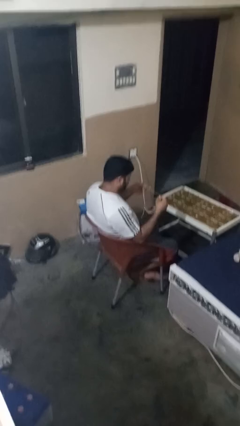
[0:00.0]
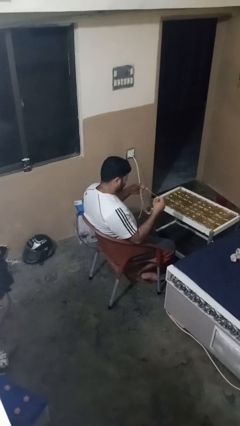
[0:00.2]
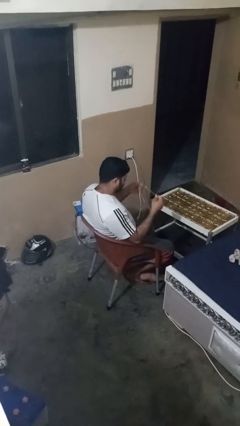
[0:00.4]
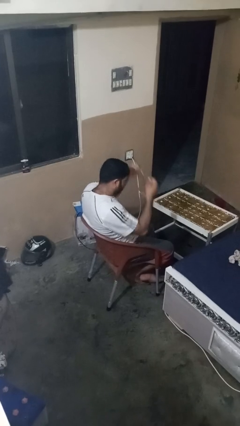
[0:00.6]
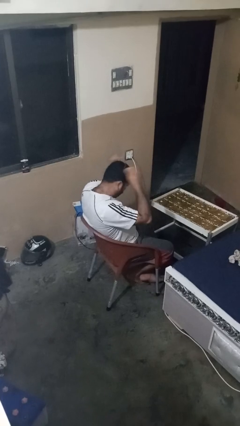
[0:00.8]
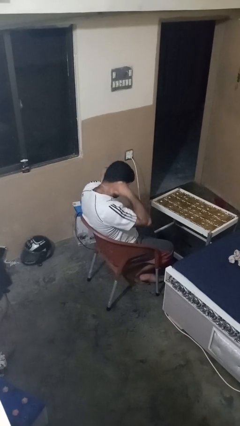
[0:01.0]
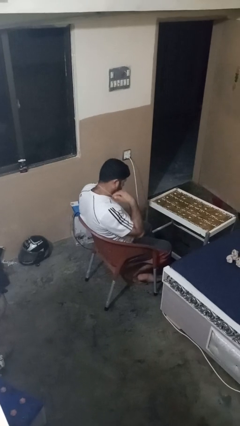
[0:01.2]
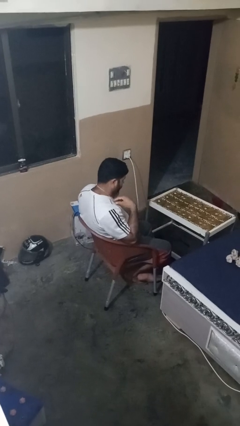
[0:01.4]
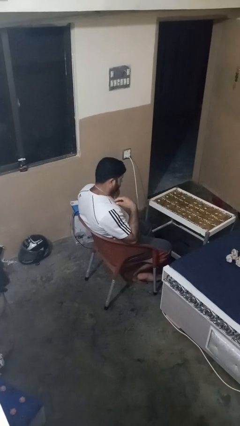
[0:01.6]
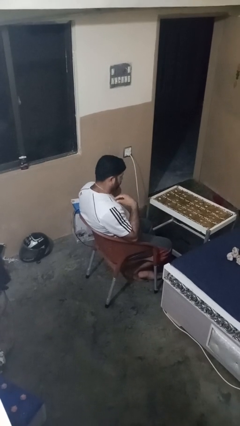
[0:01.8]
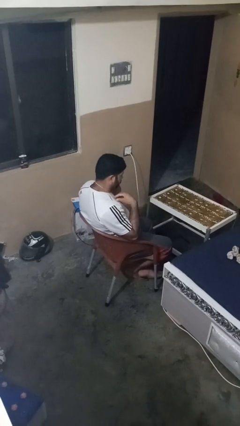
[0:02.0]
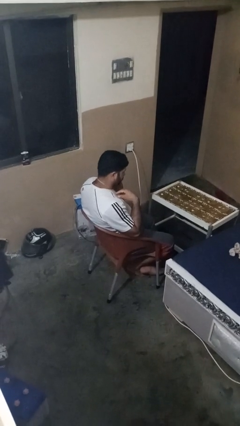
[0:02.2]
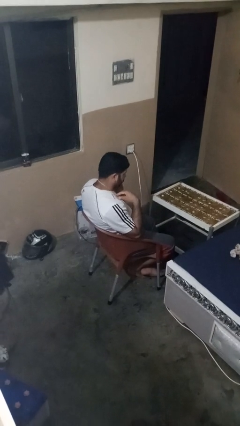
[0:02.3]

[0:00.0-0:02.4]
person puts on necklace

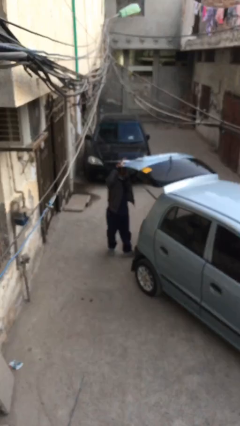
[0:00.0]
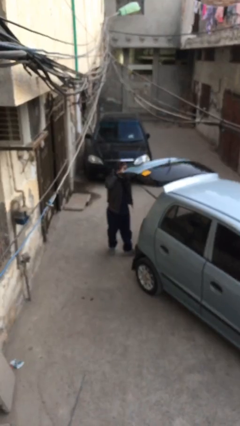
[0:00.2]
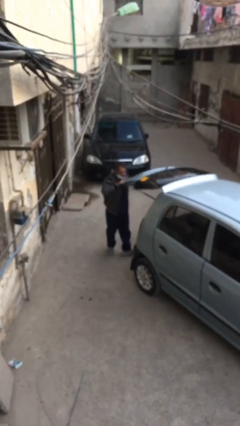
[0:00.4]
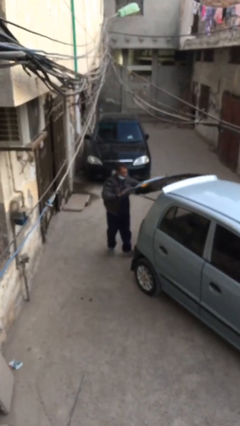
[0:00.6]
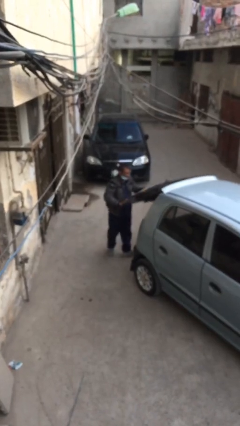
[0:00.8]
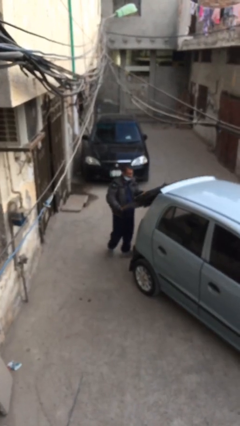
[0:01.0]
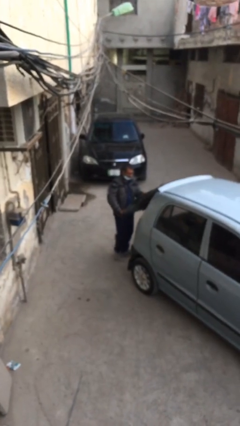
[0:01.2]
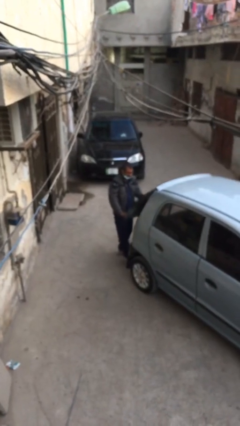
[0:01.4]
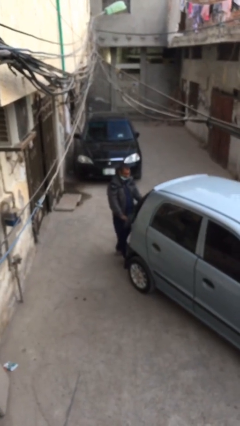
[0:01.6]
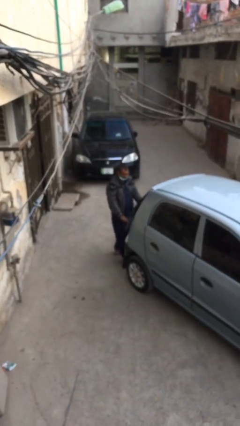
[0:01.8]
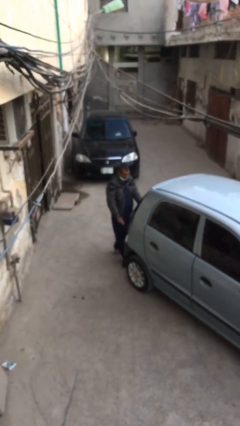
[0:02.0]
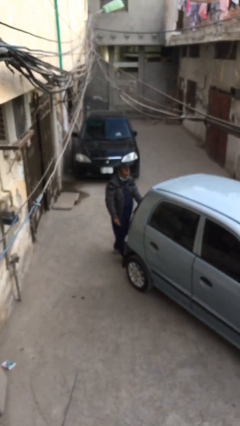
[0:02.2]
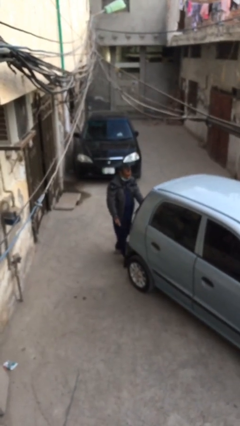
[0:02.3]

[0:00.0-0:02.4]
person closes car trunk

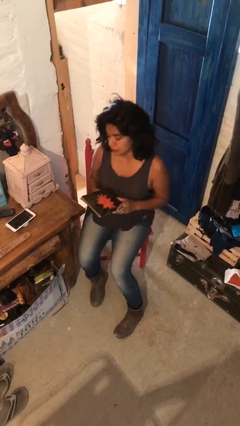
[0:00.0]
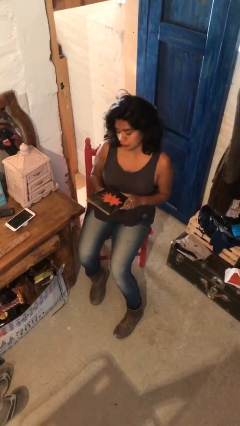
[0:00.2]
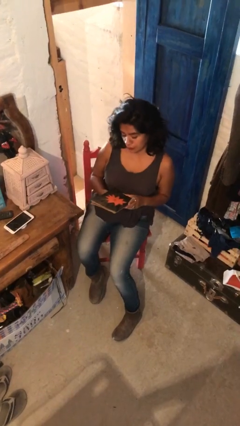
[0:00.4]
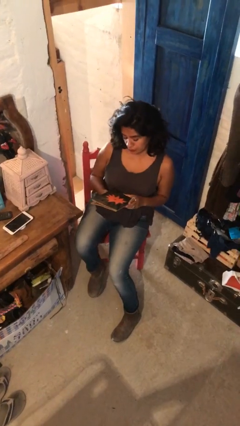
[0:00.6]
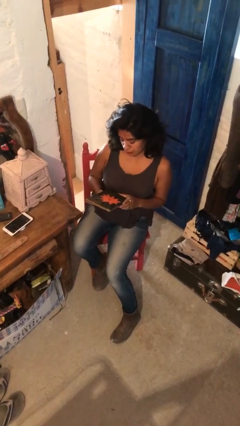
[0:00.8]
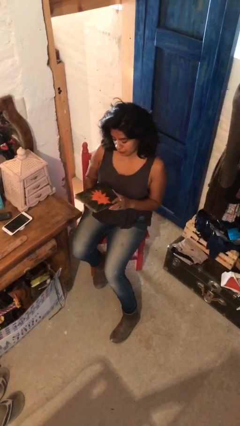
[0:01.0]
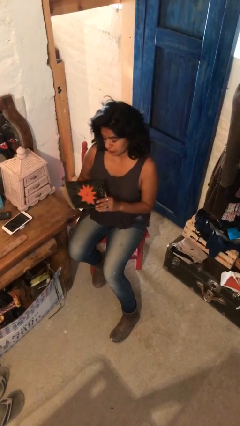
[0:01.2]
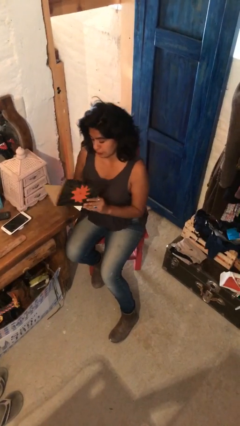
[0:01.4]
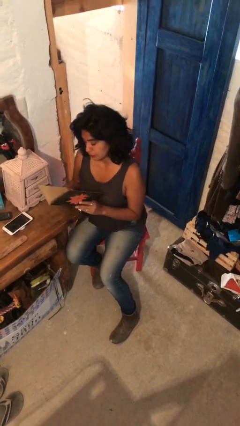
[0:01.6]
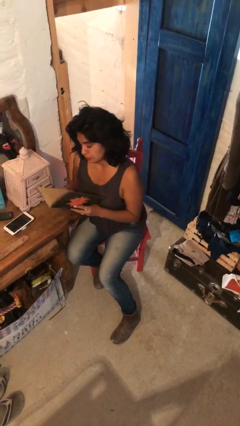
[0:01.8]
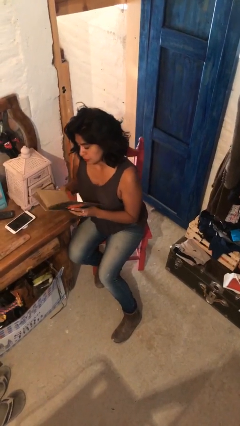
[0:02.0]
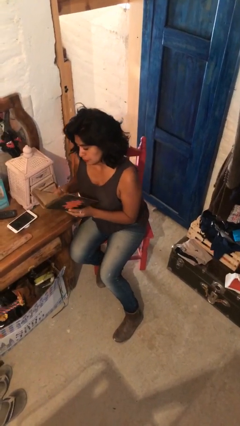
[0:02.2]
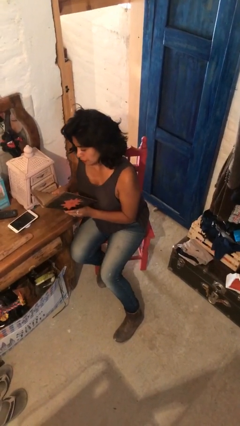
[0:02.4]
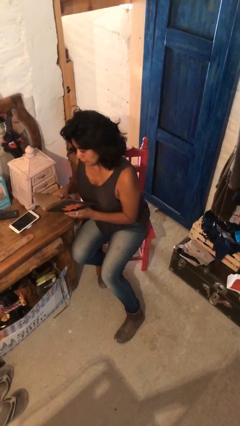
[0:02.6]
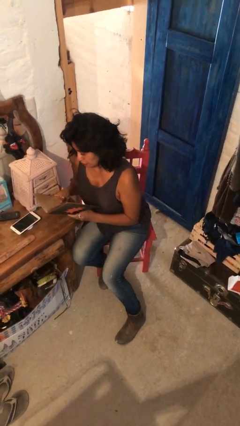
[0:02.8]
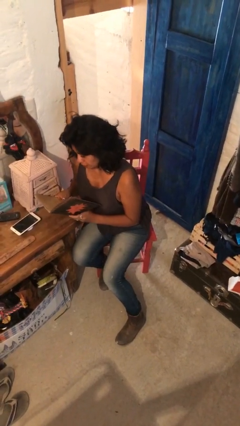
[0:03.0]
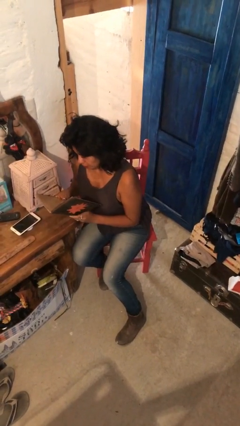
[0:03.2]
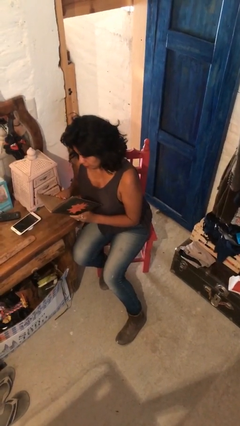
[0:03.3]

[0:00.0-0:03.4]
person reads document

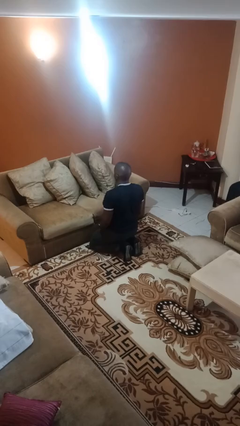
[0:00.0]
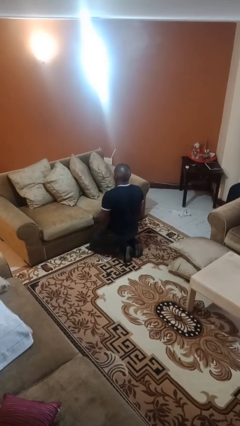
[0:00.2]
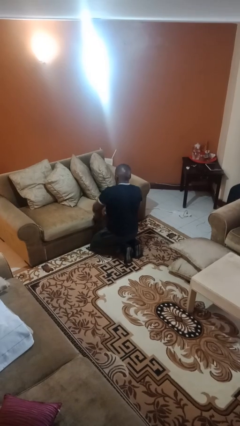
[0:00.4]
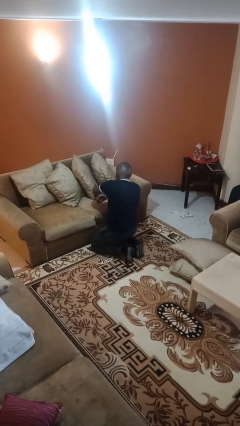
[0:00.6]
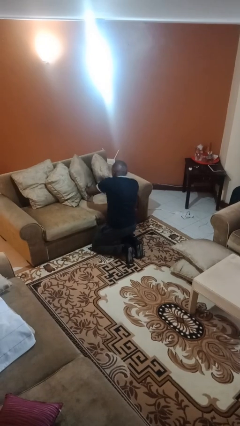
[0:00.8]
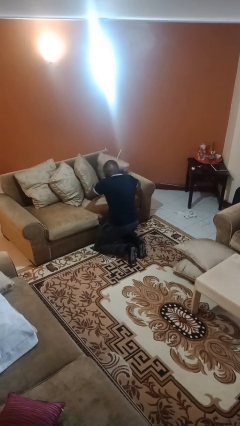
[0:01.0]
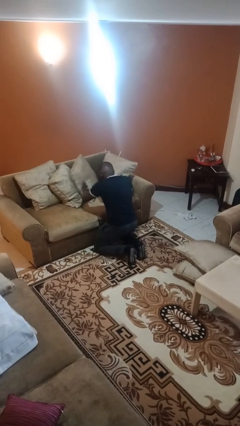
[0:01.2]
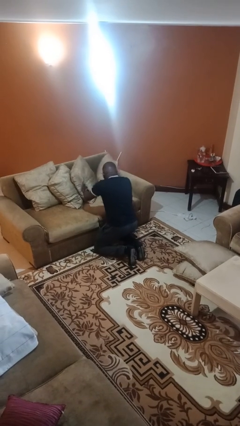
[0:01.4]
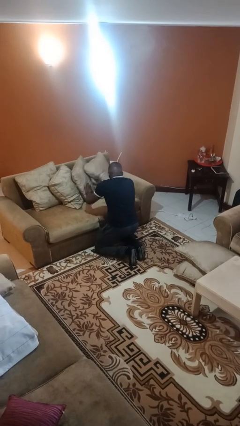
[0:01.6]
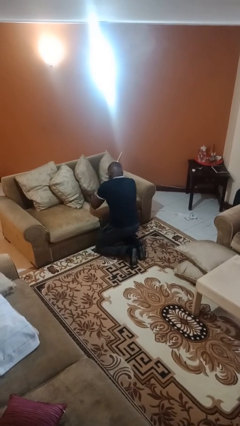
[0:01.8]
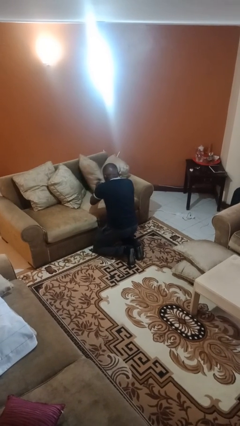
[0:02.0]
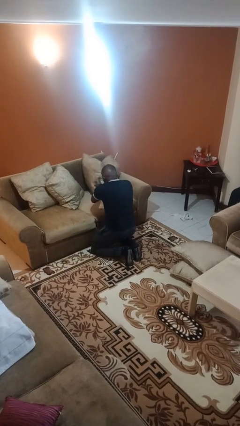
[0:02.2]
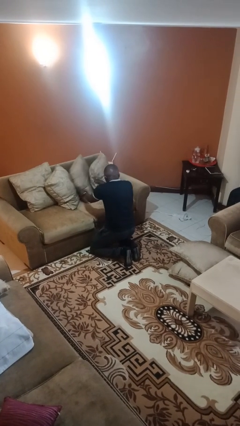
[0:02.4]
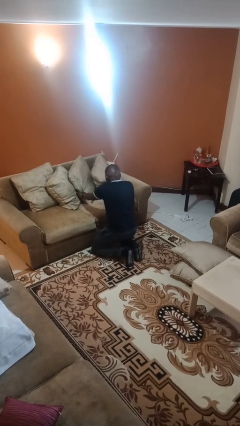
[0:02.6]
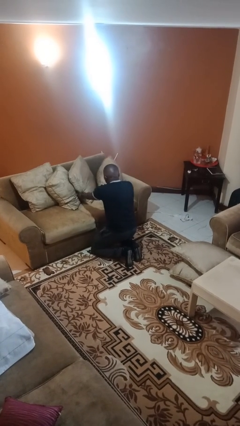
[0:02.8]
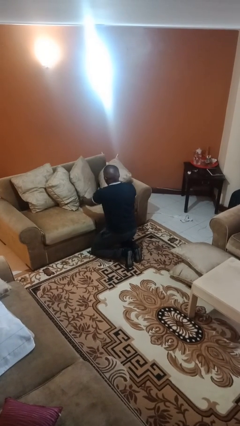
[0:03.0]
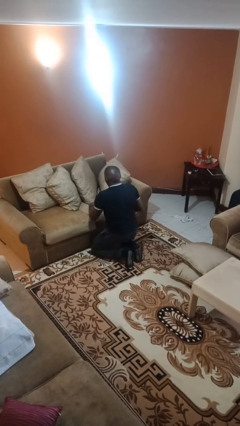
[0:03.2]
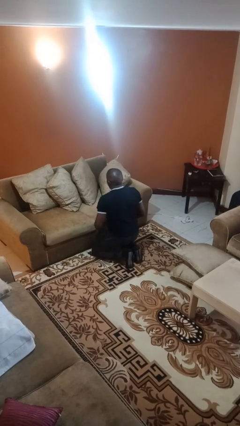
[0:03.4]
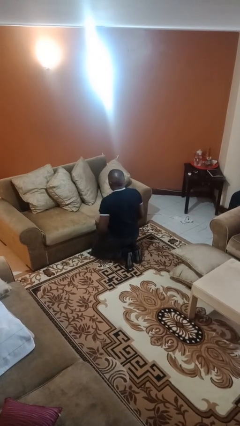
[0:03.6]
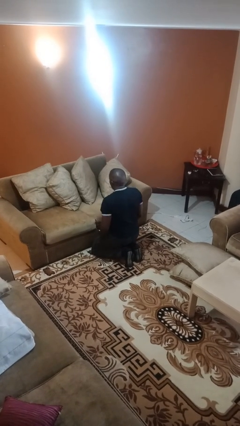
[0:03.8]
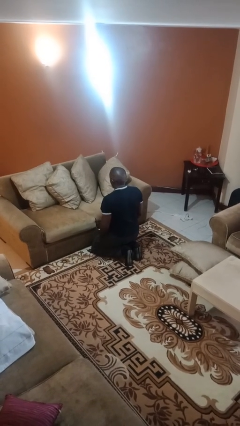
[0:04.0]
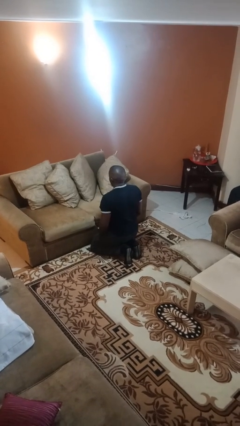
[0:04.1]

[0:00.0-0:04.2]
person searches in couch

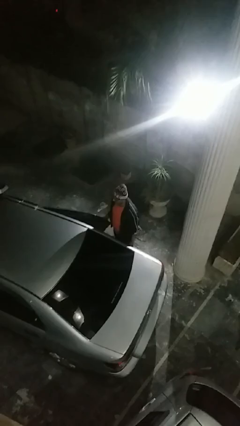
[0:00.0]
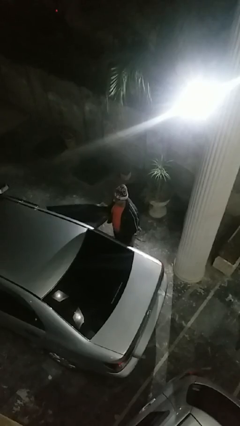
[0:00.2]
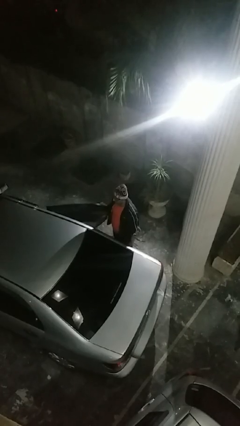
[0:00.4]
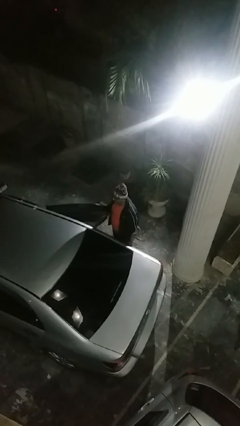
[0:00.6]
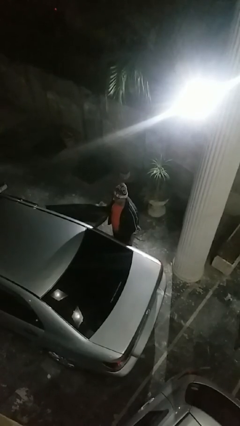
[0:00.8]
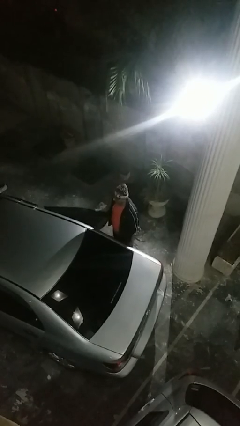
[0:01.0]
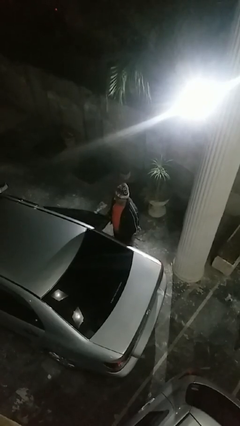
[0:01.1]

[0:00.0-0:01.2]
person opens car door

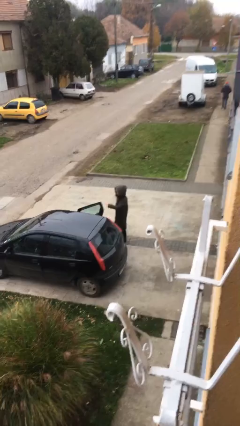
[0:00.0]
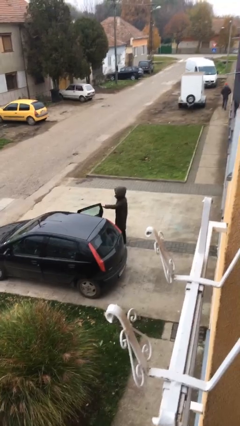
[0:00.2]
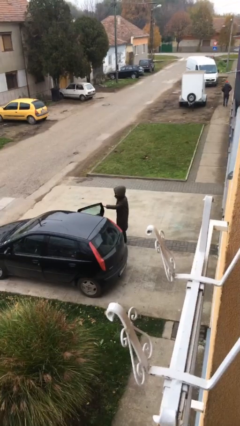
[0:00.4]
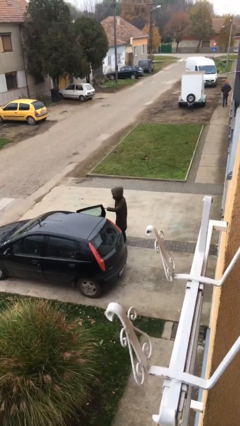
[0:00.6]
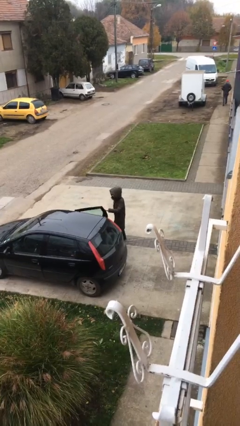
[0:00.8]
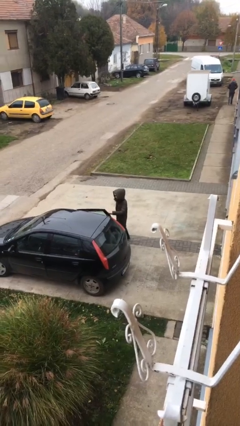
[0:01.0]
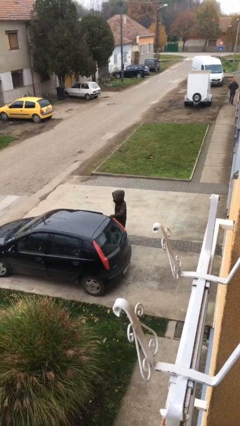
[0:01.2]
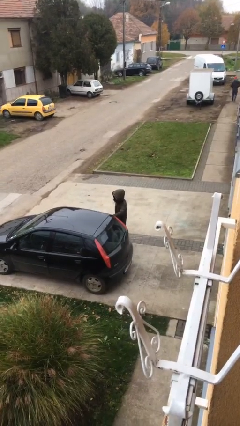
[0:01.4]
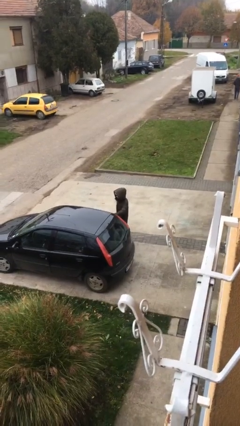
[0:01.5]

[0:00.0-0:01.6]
person closes car door

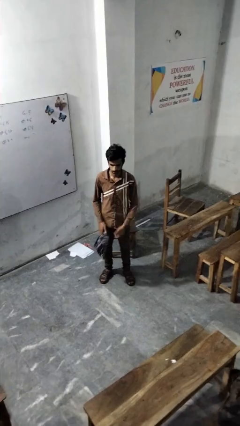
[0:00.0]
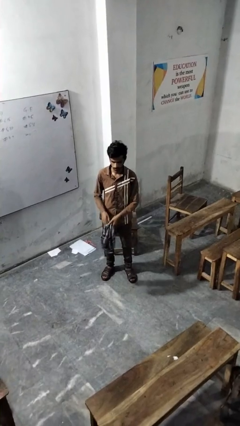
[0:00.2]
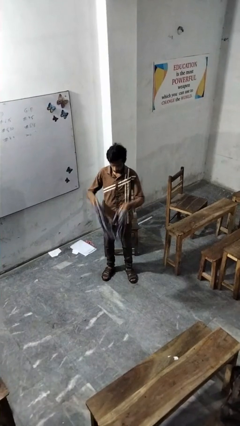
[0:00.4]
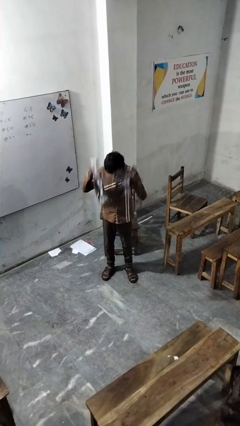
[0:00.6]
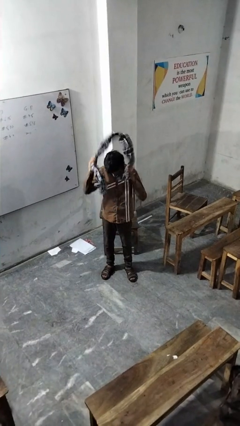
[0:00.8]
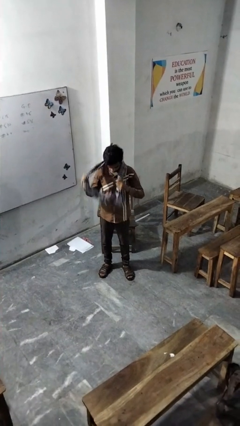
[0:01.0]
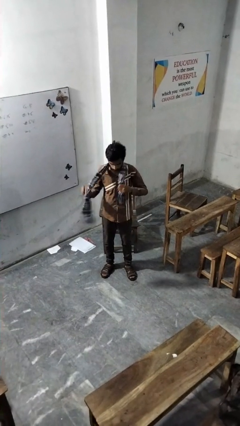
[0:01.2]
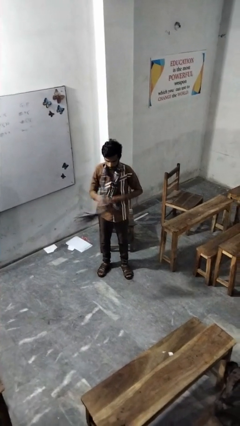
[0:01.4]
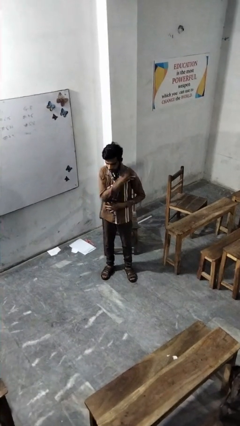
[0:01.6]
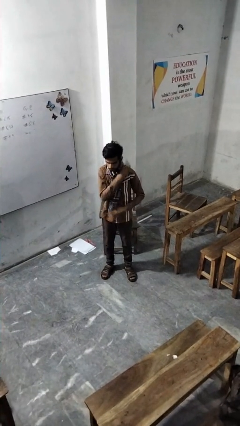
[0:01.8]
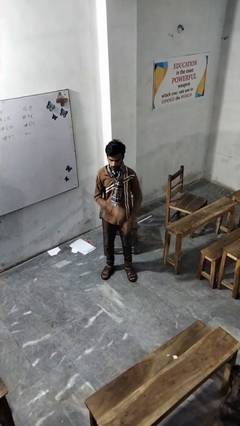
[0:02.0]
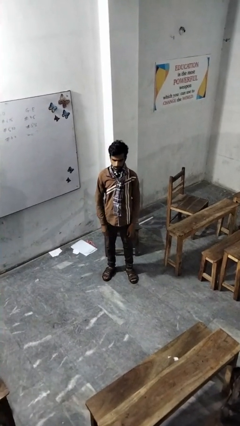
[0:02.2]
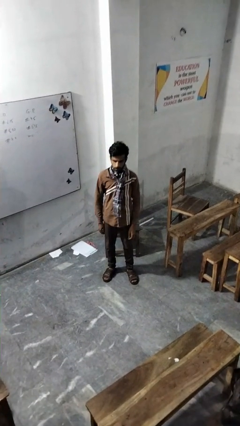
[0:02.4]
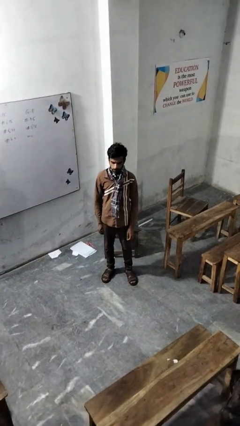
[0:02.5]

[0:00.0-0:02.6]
person puts on scarf
